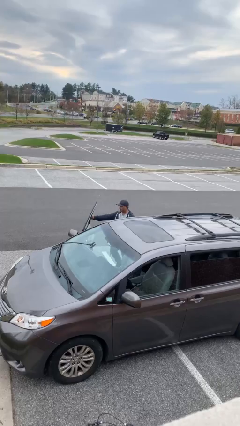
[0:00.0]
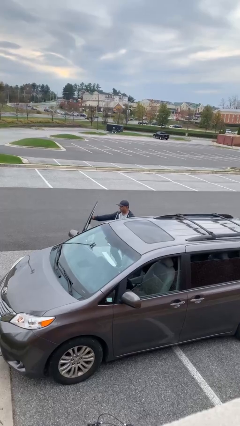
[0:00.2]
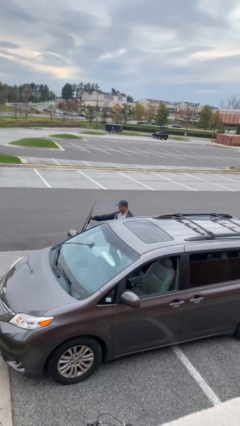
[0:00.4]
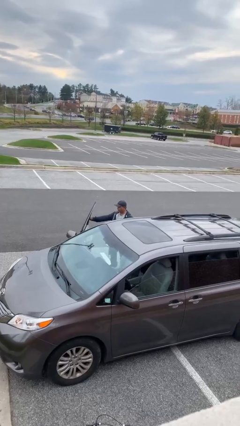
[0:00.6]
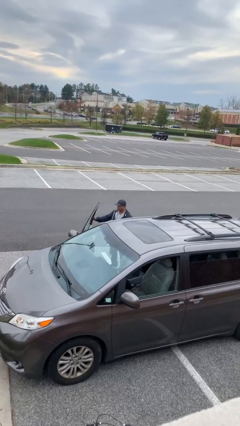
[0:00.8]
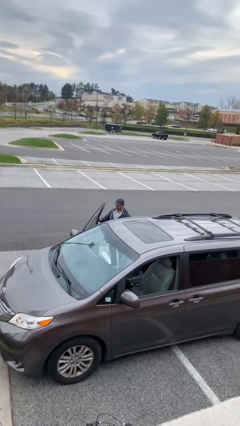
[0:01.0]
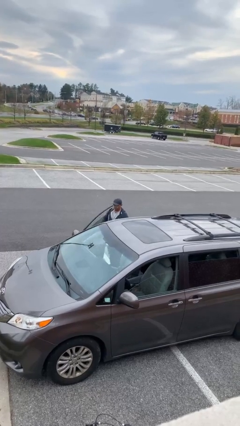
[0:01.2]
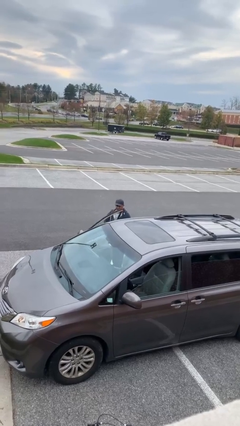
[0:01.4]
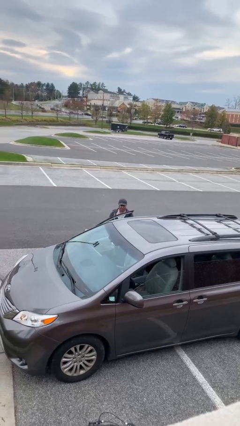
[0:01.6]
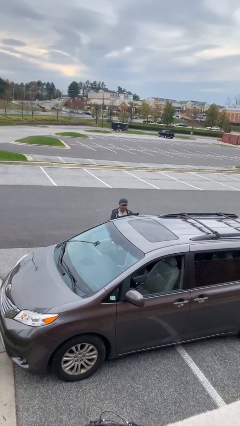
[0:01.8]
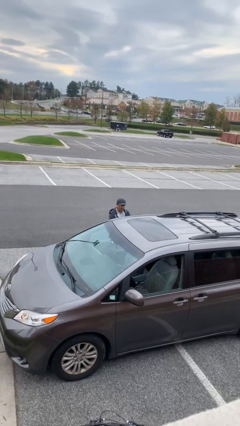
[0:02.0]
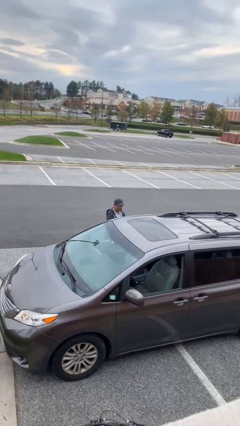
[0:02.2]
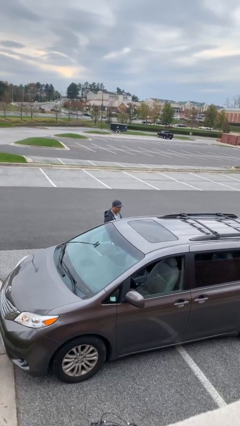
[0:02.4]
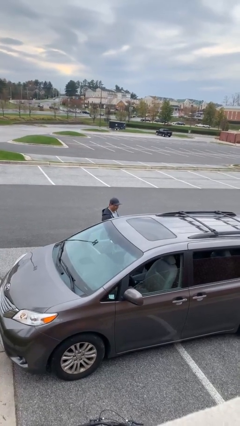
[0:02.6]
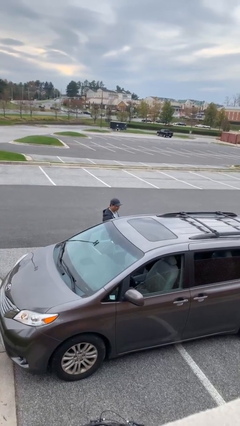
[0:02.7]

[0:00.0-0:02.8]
person closes car door

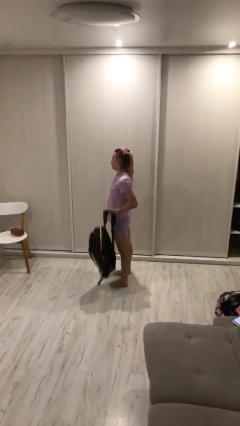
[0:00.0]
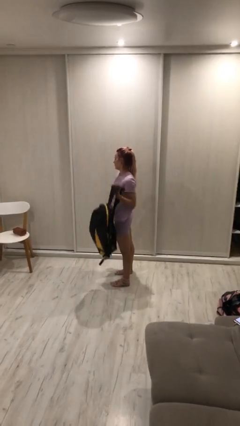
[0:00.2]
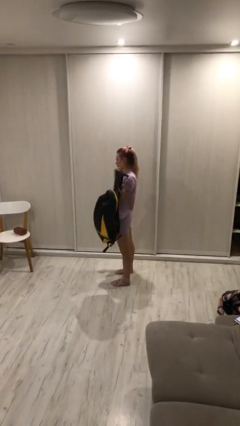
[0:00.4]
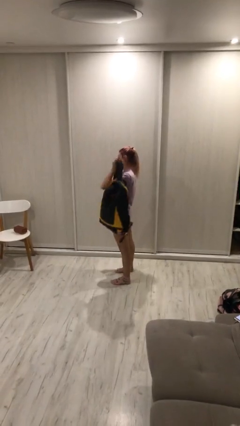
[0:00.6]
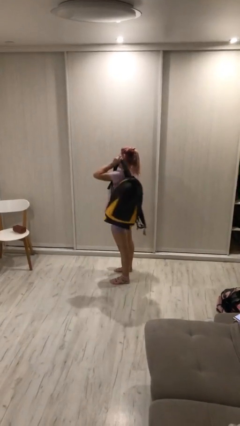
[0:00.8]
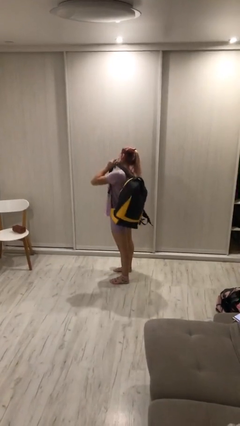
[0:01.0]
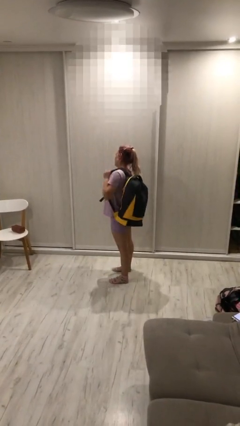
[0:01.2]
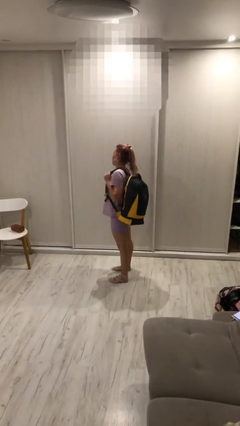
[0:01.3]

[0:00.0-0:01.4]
person puts on backpack

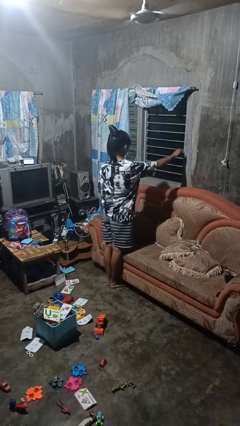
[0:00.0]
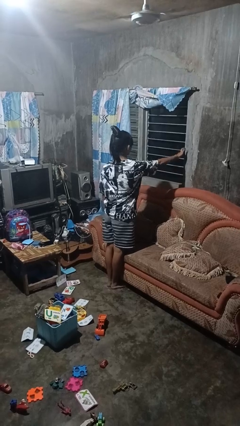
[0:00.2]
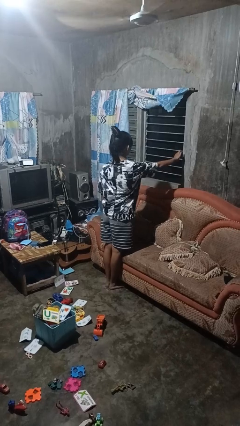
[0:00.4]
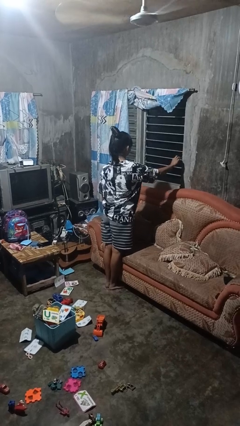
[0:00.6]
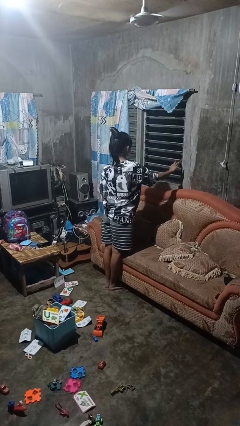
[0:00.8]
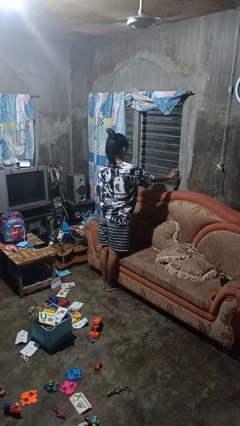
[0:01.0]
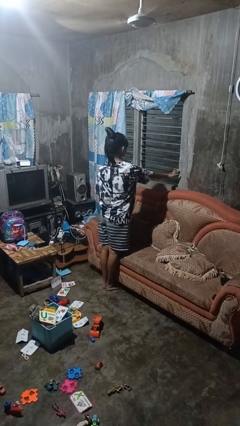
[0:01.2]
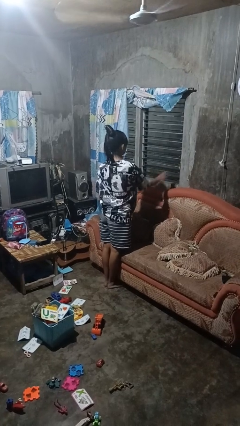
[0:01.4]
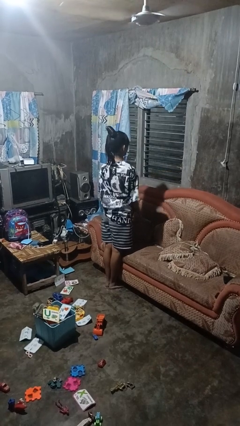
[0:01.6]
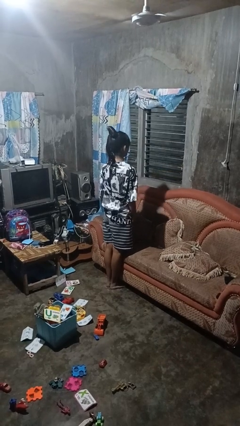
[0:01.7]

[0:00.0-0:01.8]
person opens home window

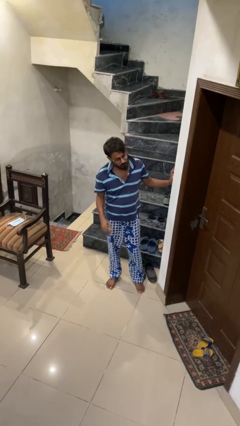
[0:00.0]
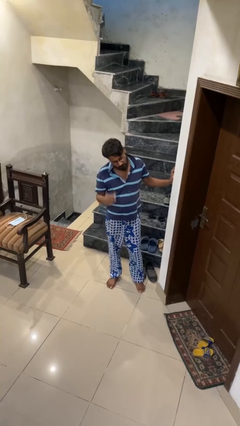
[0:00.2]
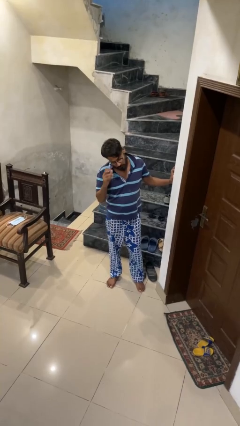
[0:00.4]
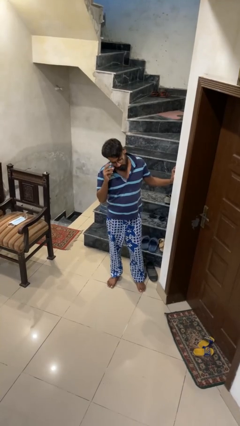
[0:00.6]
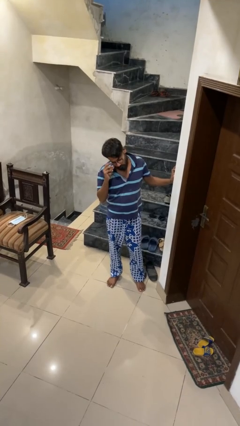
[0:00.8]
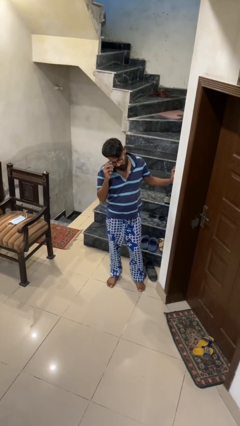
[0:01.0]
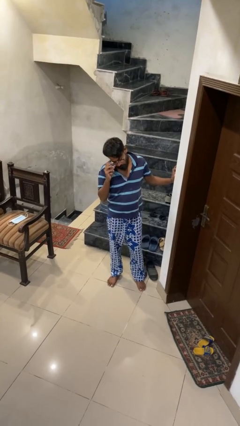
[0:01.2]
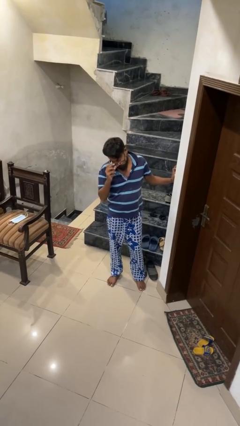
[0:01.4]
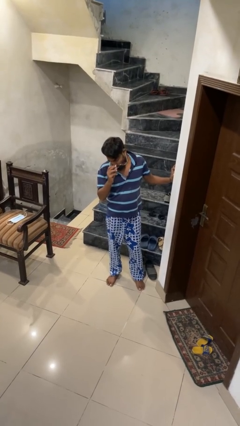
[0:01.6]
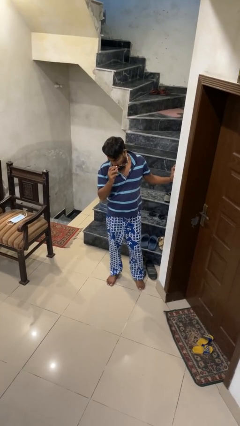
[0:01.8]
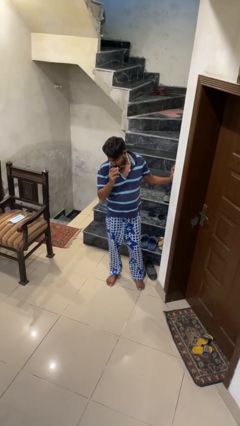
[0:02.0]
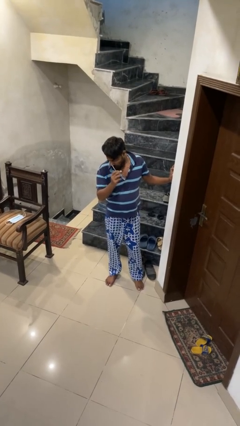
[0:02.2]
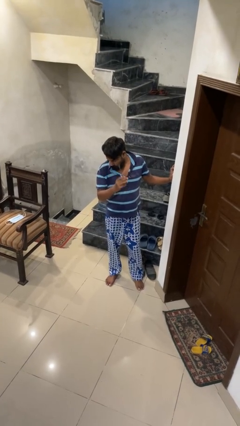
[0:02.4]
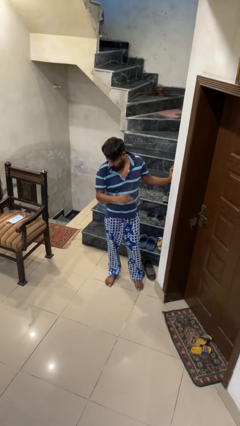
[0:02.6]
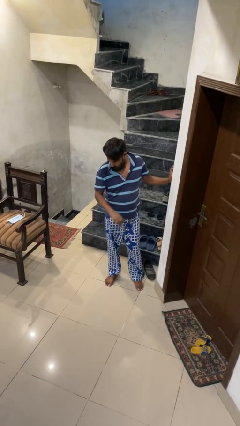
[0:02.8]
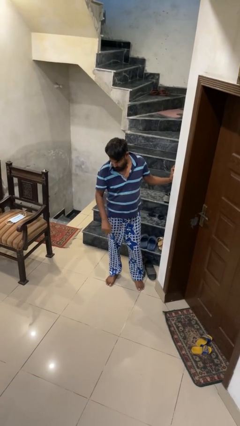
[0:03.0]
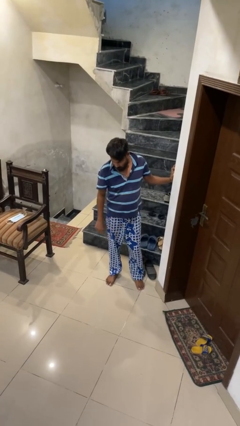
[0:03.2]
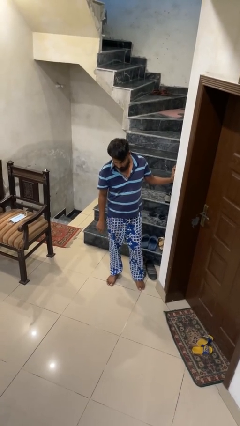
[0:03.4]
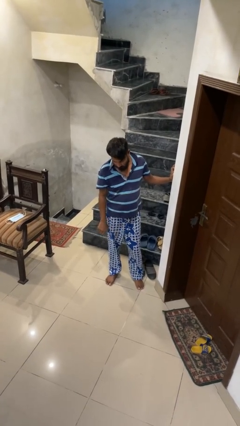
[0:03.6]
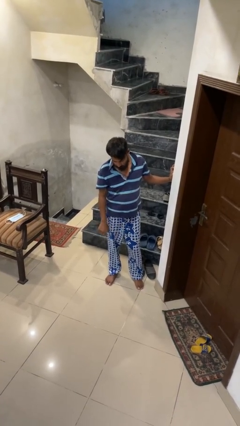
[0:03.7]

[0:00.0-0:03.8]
person takes off glasses

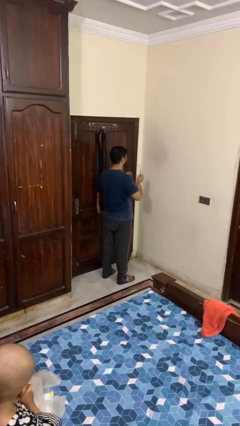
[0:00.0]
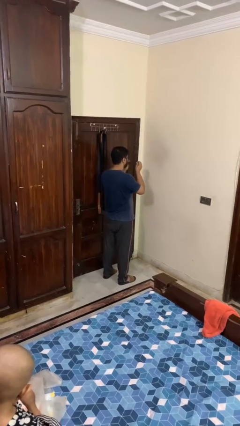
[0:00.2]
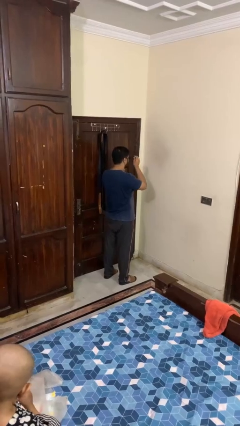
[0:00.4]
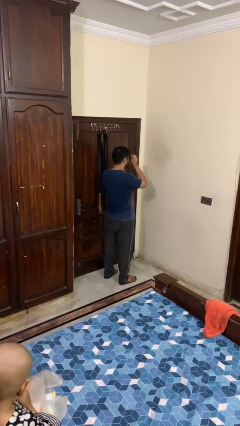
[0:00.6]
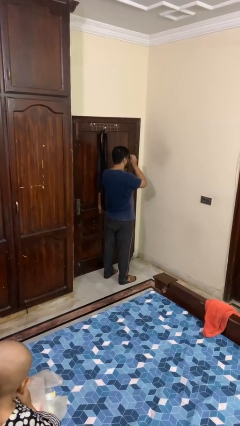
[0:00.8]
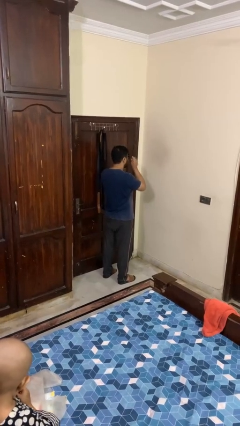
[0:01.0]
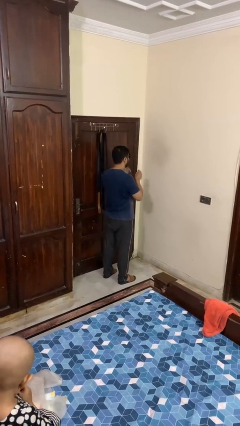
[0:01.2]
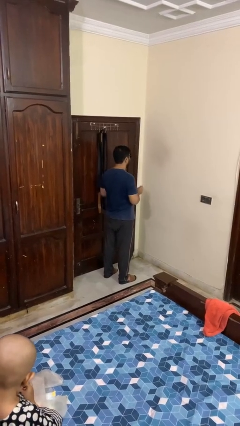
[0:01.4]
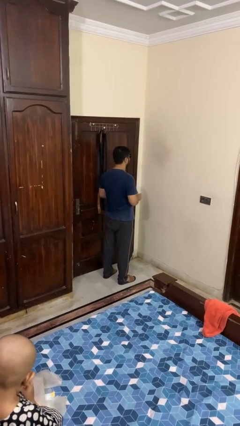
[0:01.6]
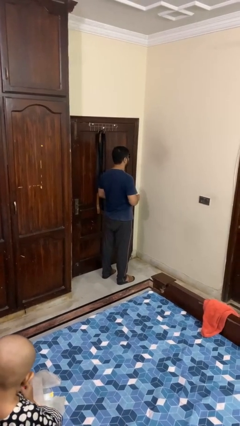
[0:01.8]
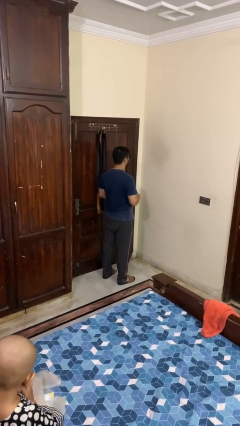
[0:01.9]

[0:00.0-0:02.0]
person puts on sunglasses

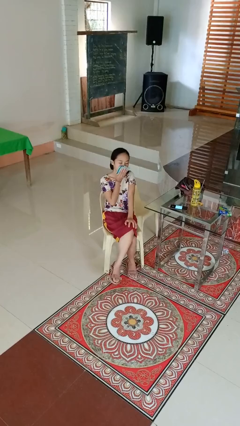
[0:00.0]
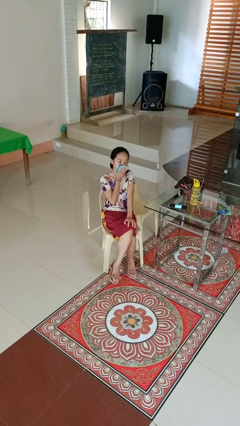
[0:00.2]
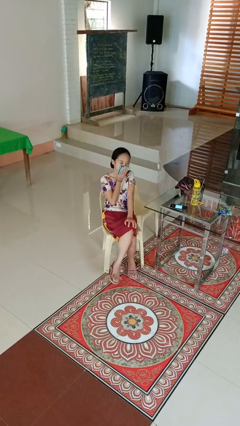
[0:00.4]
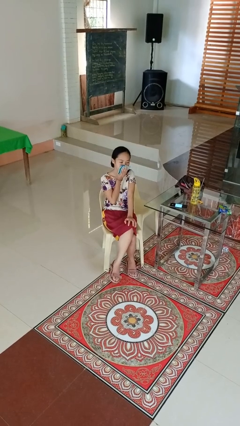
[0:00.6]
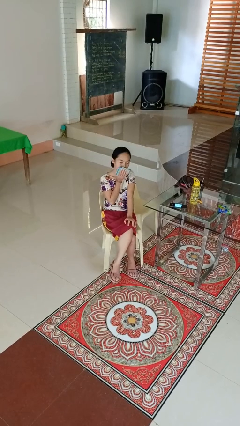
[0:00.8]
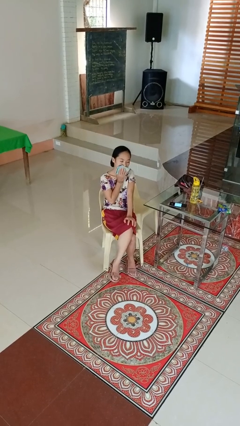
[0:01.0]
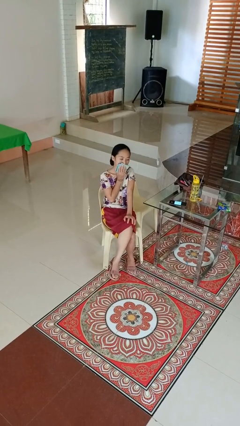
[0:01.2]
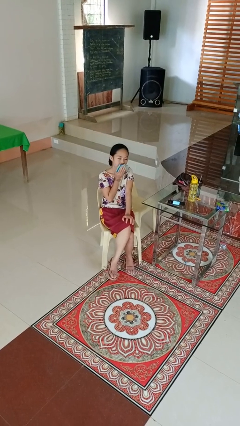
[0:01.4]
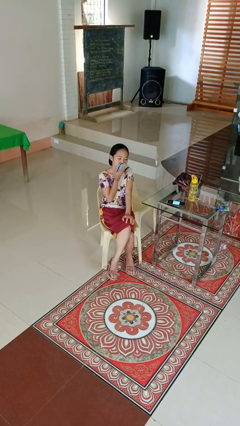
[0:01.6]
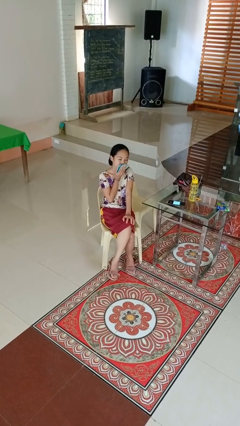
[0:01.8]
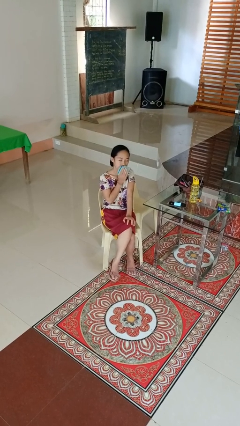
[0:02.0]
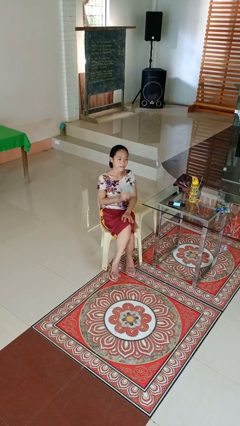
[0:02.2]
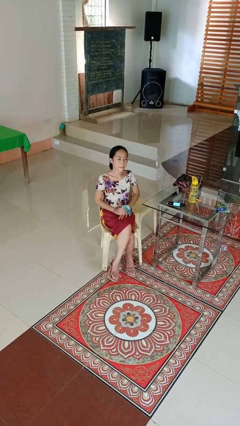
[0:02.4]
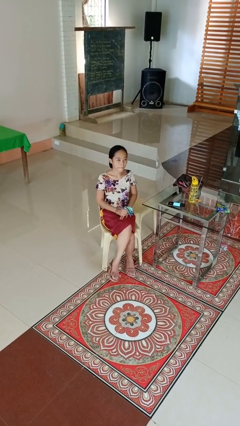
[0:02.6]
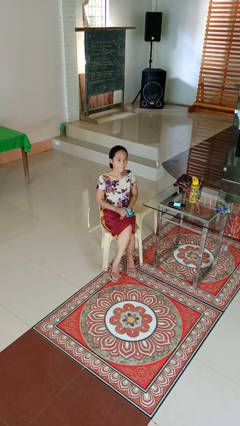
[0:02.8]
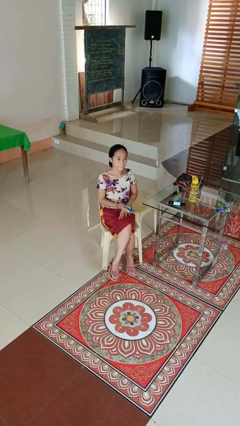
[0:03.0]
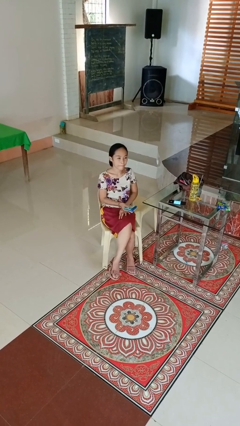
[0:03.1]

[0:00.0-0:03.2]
person wipes mouth with napkin

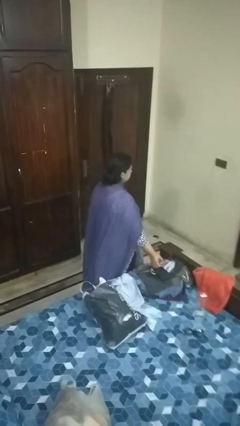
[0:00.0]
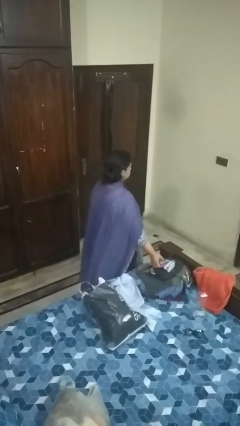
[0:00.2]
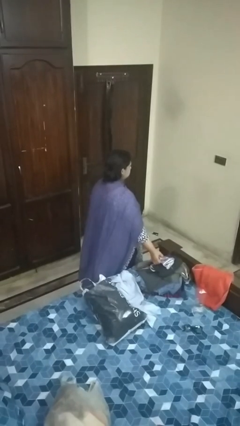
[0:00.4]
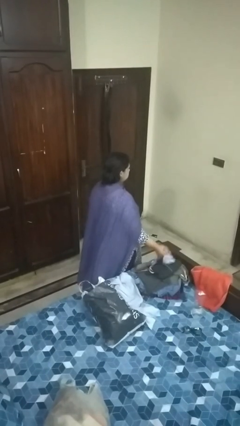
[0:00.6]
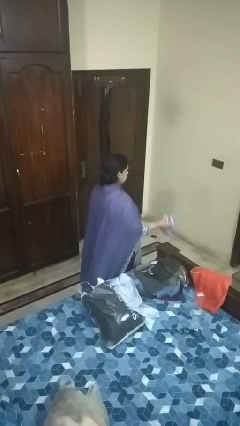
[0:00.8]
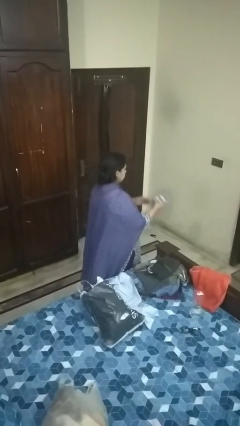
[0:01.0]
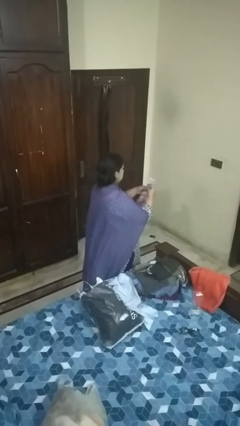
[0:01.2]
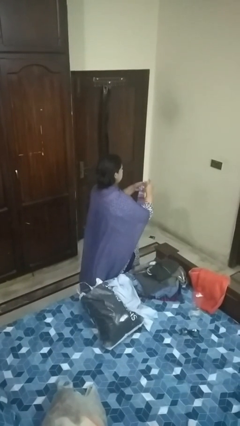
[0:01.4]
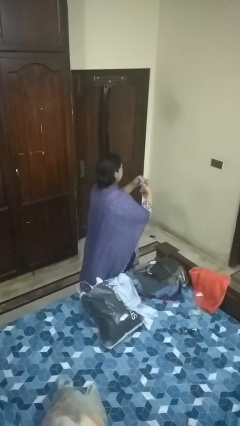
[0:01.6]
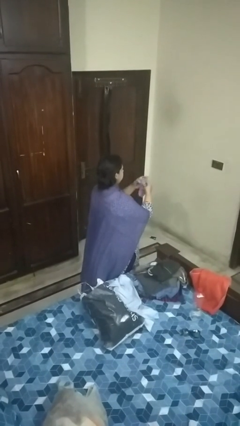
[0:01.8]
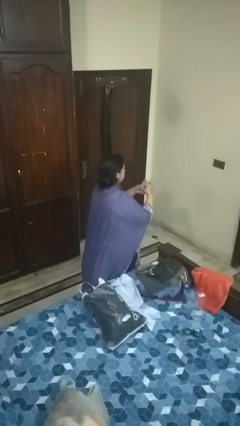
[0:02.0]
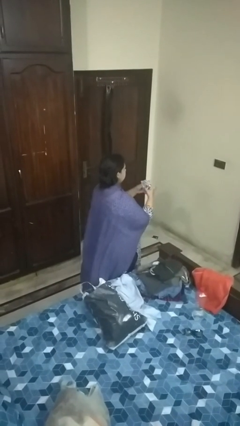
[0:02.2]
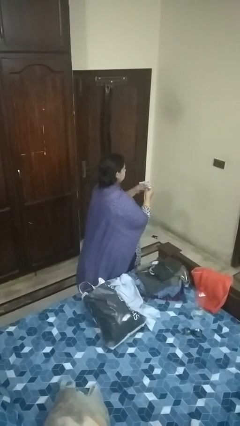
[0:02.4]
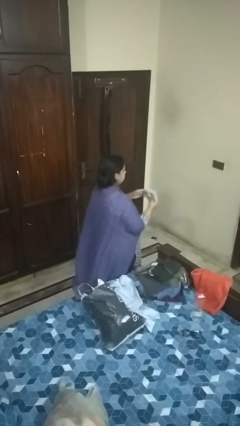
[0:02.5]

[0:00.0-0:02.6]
person folds socks
